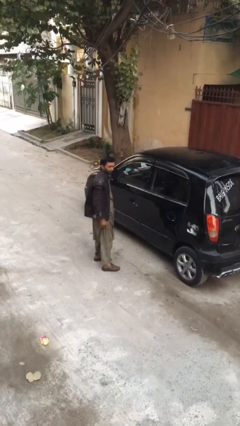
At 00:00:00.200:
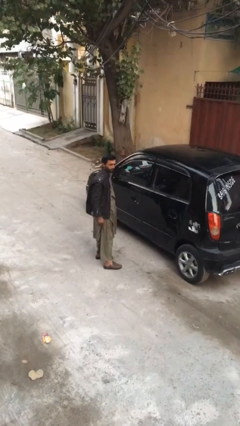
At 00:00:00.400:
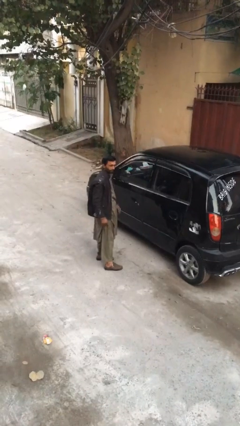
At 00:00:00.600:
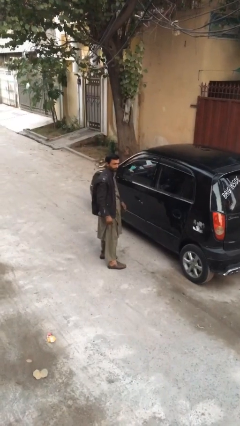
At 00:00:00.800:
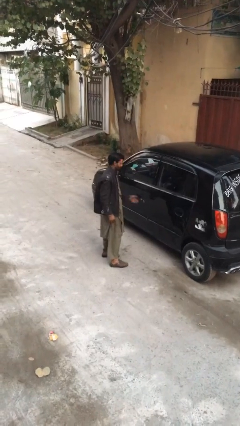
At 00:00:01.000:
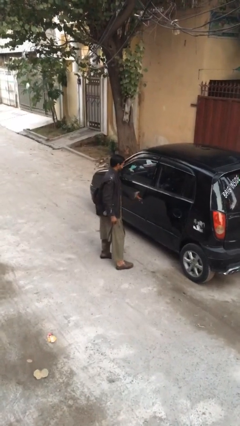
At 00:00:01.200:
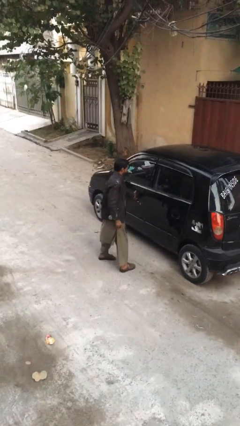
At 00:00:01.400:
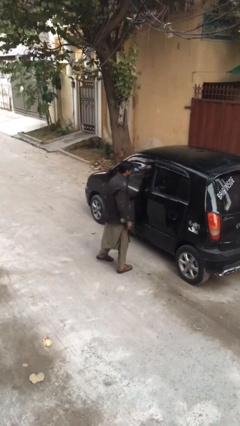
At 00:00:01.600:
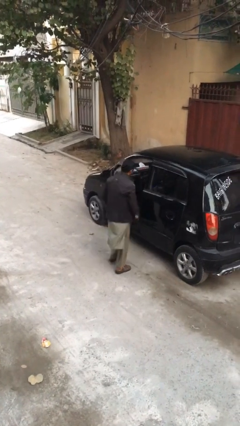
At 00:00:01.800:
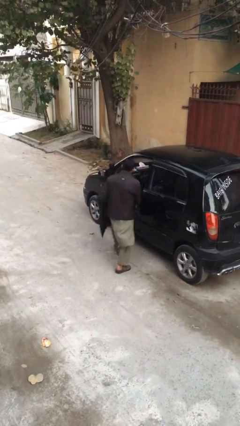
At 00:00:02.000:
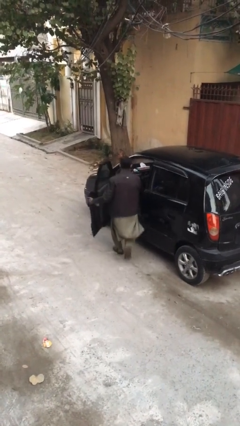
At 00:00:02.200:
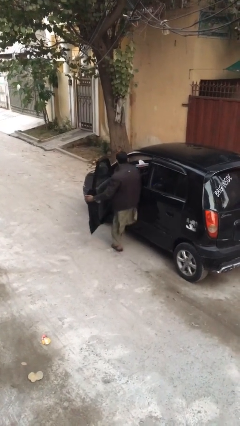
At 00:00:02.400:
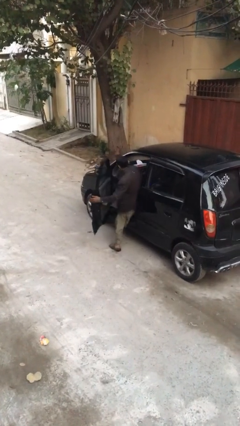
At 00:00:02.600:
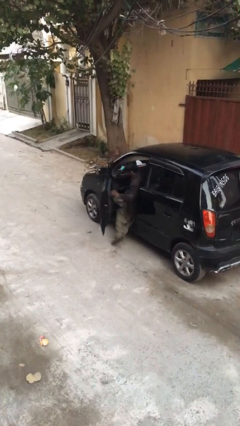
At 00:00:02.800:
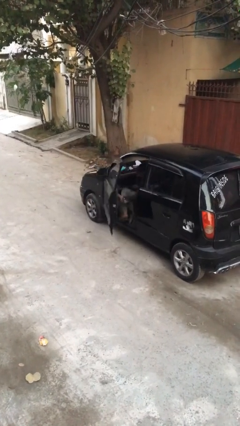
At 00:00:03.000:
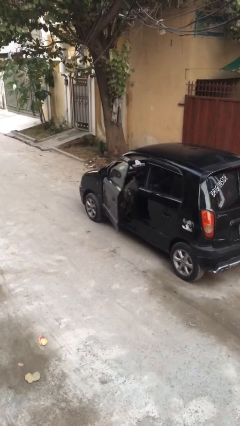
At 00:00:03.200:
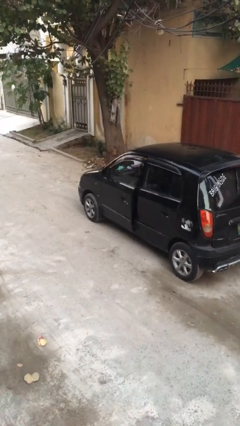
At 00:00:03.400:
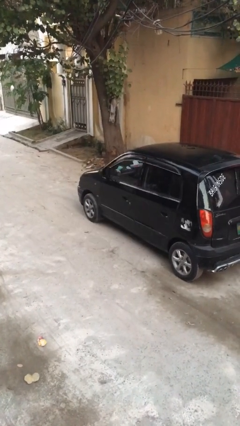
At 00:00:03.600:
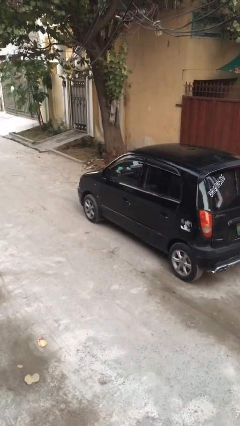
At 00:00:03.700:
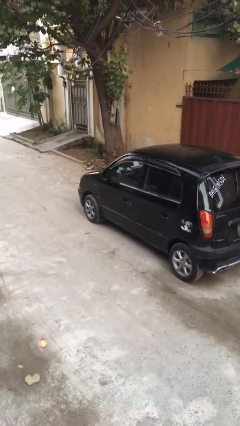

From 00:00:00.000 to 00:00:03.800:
car picks up person

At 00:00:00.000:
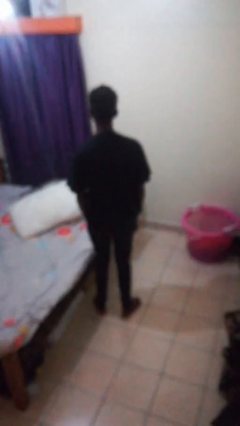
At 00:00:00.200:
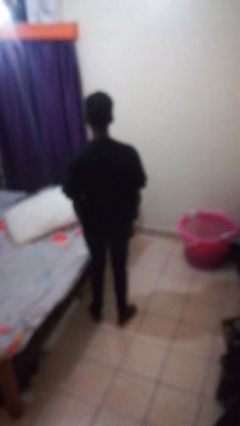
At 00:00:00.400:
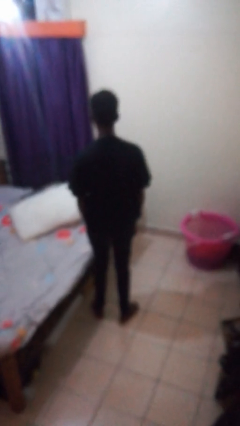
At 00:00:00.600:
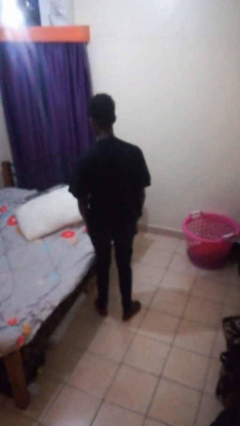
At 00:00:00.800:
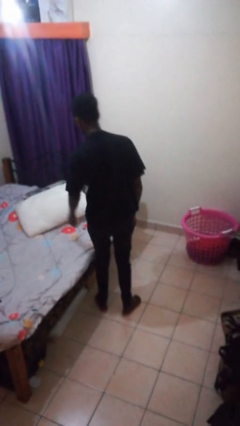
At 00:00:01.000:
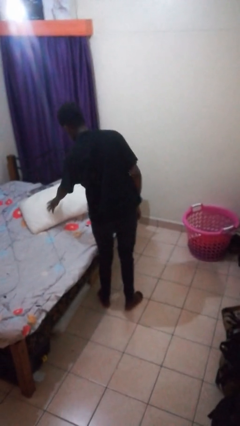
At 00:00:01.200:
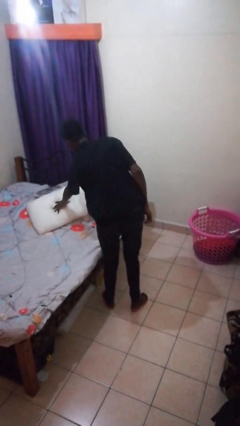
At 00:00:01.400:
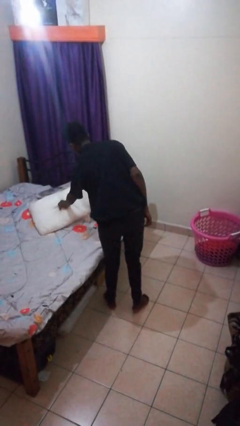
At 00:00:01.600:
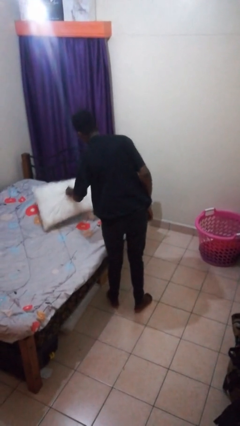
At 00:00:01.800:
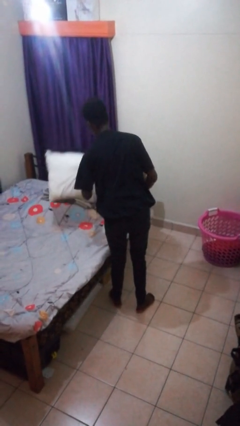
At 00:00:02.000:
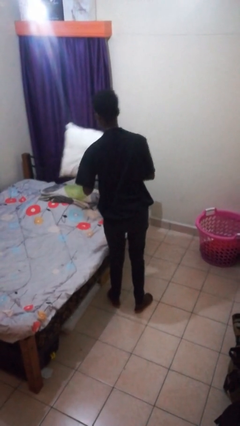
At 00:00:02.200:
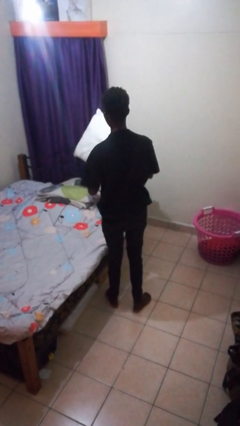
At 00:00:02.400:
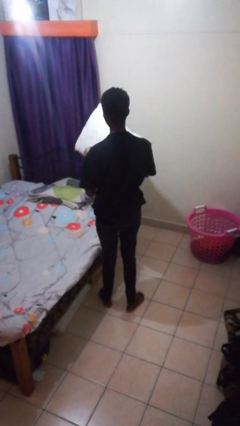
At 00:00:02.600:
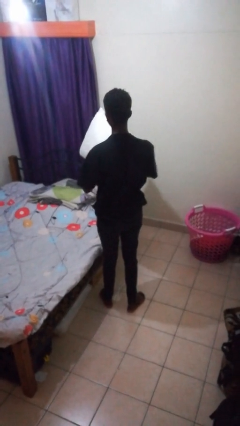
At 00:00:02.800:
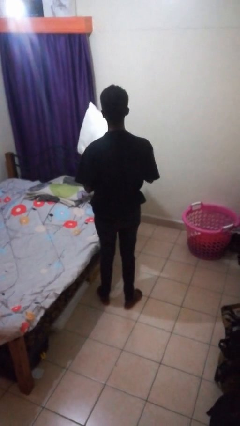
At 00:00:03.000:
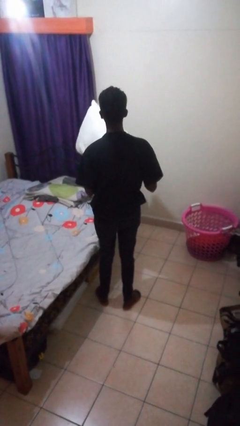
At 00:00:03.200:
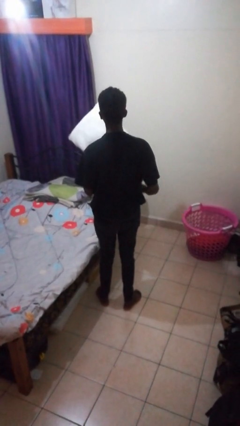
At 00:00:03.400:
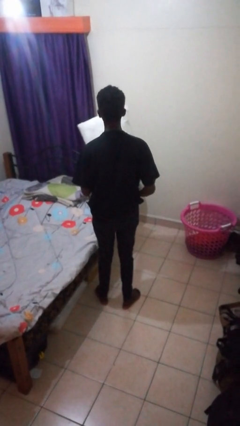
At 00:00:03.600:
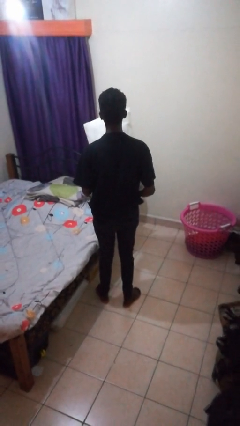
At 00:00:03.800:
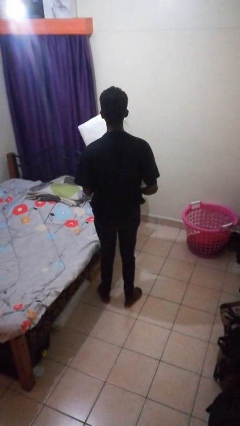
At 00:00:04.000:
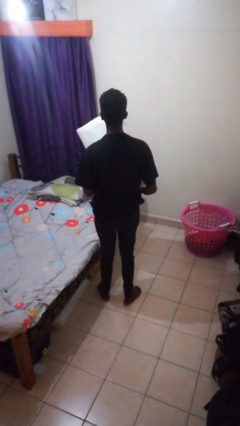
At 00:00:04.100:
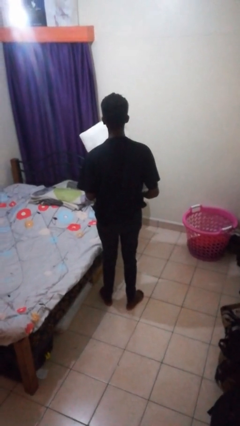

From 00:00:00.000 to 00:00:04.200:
person picks up object from bed

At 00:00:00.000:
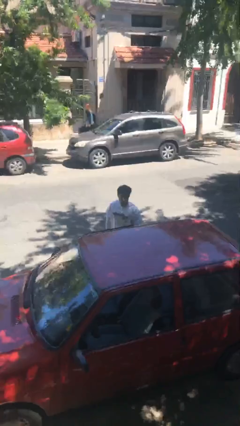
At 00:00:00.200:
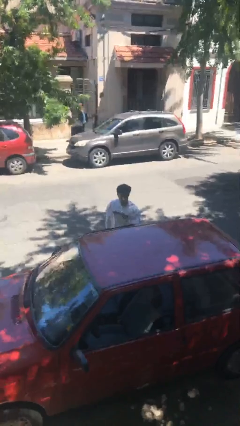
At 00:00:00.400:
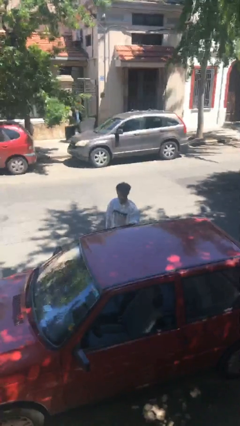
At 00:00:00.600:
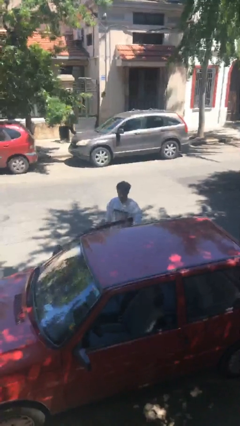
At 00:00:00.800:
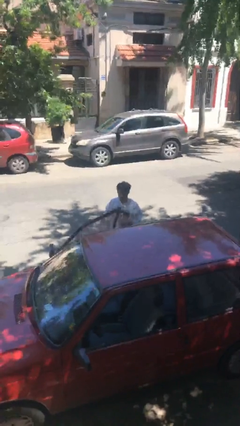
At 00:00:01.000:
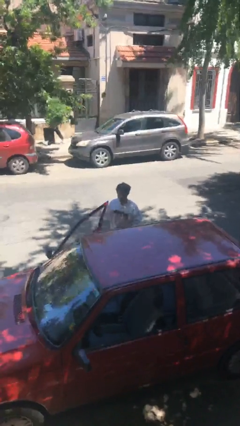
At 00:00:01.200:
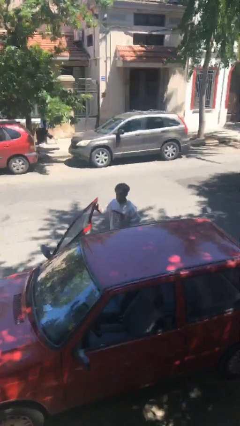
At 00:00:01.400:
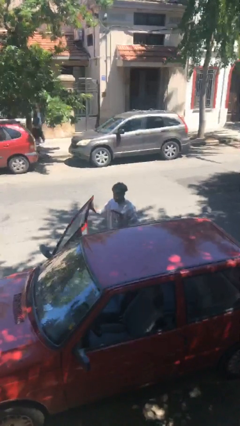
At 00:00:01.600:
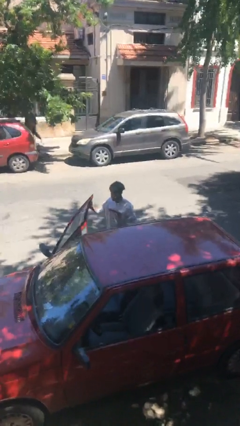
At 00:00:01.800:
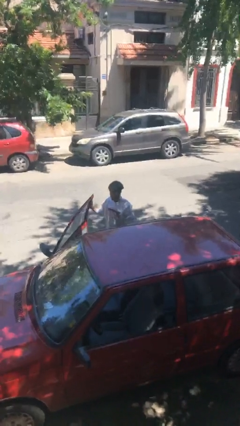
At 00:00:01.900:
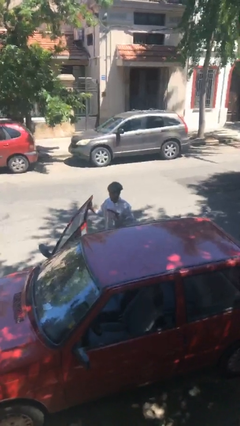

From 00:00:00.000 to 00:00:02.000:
person opens car door

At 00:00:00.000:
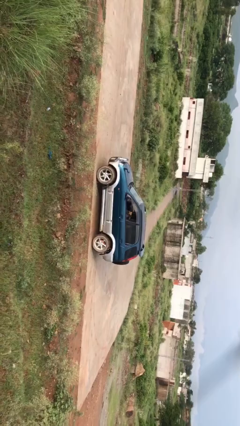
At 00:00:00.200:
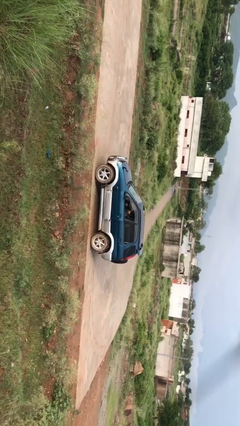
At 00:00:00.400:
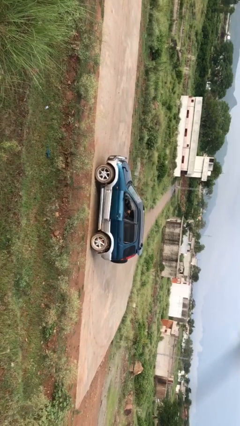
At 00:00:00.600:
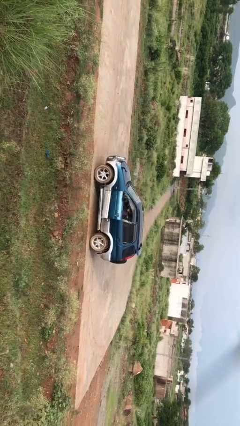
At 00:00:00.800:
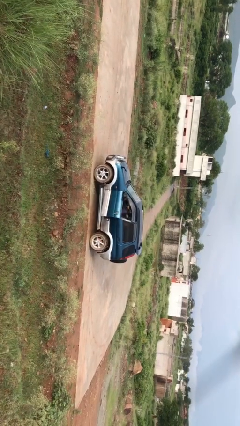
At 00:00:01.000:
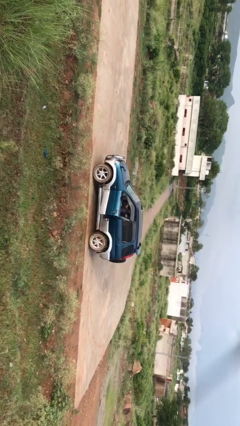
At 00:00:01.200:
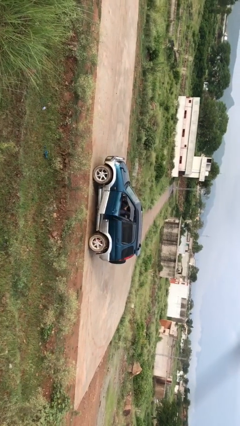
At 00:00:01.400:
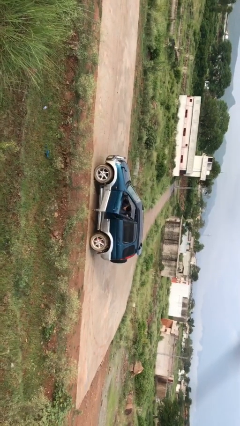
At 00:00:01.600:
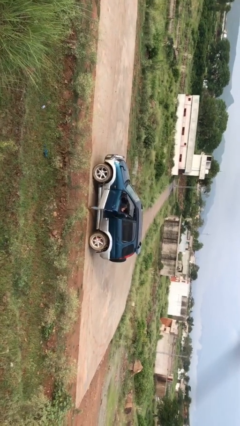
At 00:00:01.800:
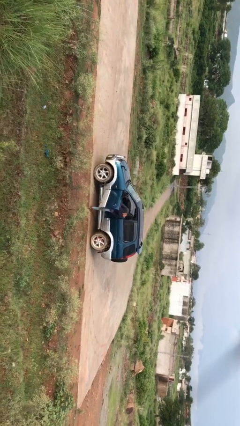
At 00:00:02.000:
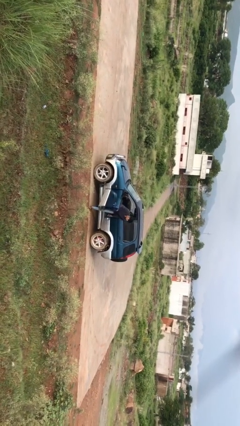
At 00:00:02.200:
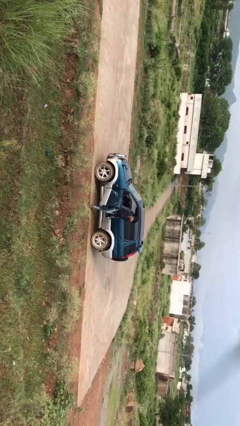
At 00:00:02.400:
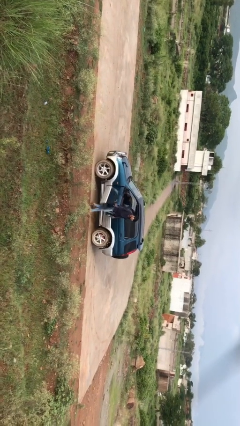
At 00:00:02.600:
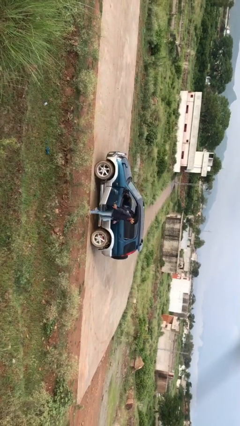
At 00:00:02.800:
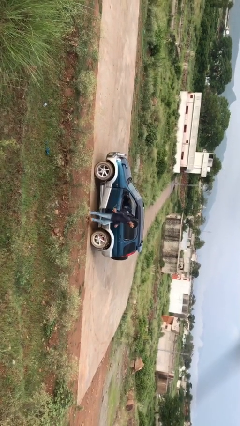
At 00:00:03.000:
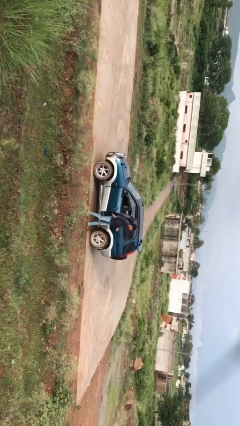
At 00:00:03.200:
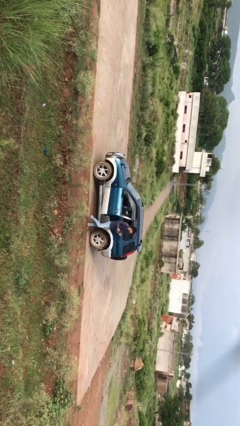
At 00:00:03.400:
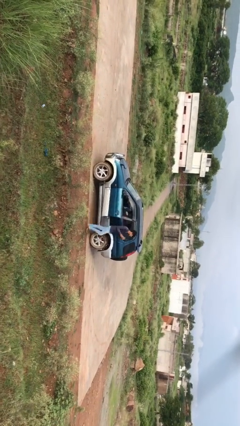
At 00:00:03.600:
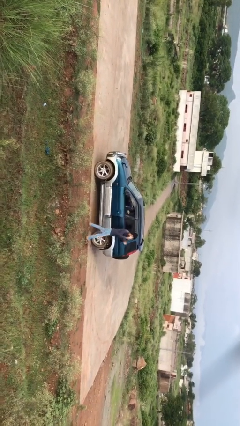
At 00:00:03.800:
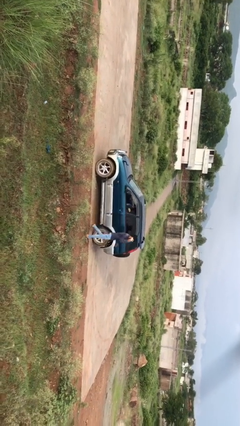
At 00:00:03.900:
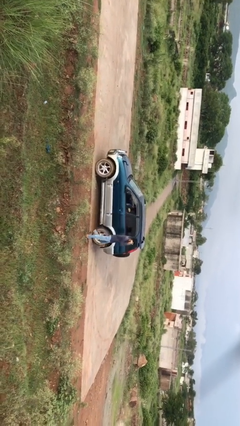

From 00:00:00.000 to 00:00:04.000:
car drops off person

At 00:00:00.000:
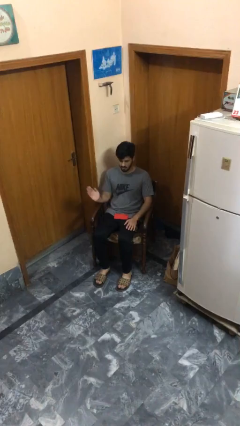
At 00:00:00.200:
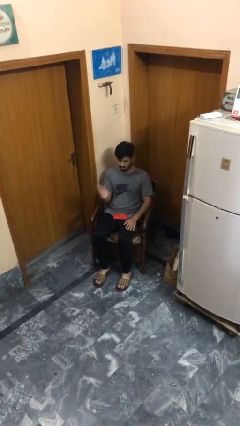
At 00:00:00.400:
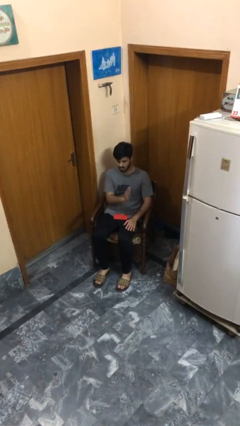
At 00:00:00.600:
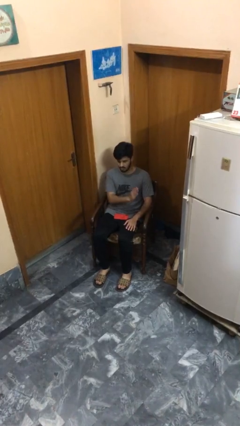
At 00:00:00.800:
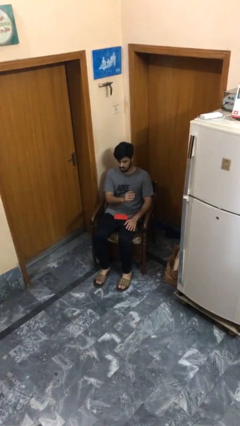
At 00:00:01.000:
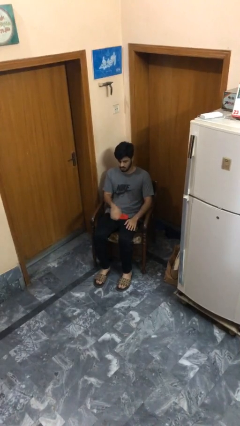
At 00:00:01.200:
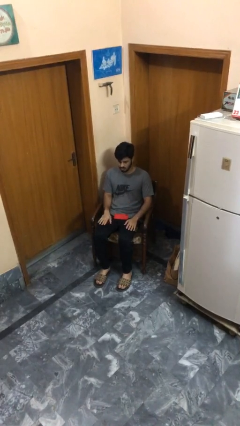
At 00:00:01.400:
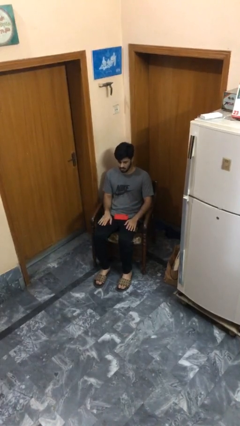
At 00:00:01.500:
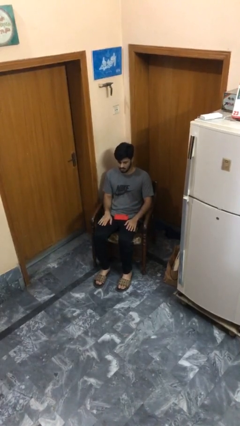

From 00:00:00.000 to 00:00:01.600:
person gestures swipe left

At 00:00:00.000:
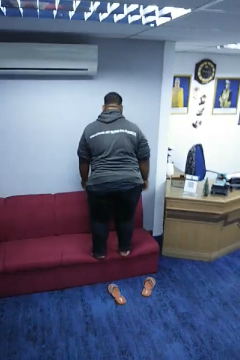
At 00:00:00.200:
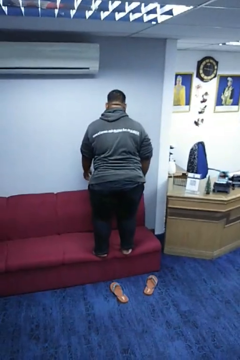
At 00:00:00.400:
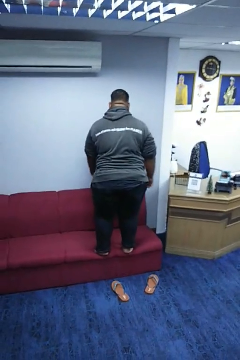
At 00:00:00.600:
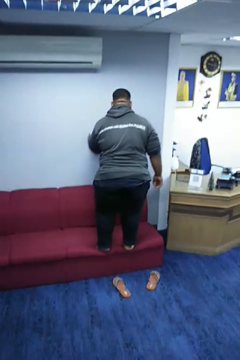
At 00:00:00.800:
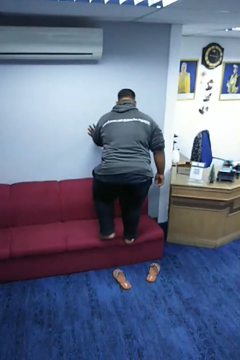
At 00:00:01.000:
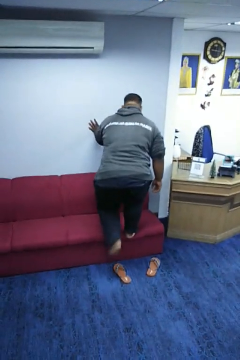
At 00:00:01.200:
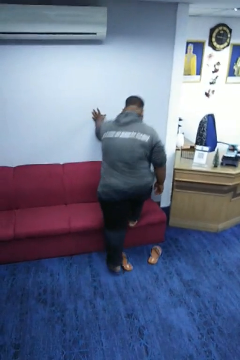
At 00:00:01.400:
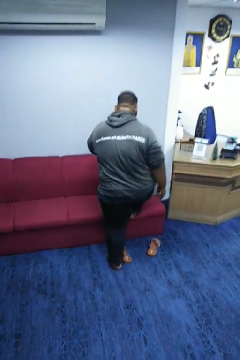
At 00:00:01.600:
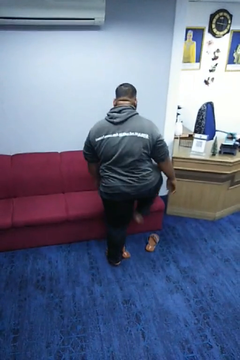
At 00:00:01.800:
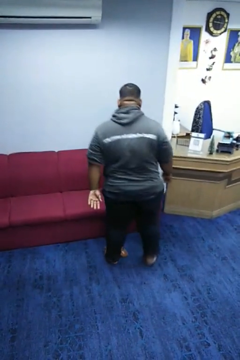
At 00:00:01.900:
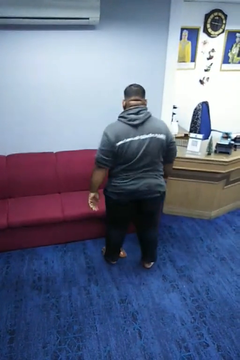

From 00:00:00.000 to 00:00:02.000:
person climbs off couch
